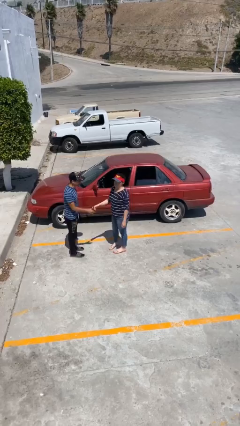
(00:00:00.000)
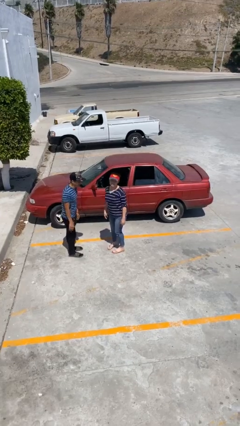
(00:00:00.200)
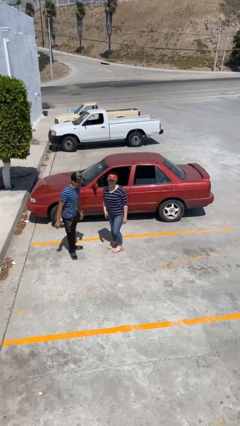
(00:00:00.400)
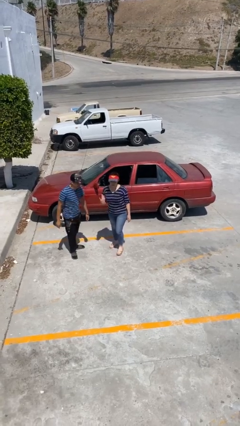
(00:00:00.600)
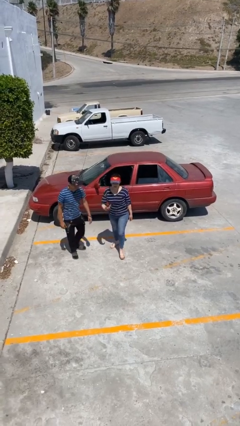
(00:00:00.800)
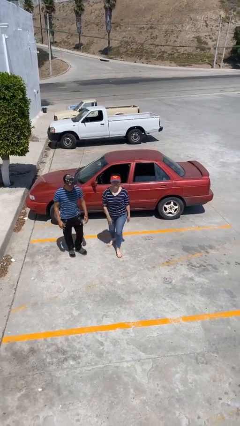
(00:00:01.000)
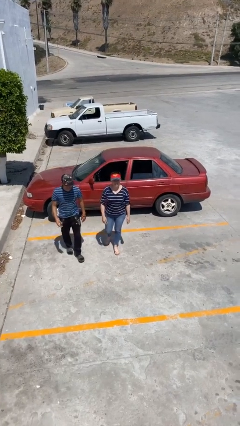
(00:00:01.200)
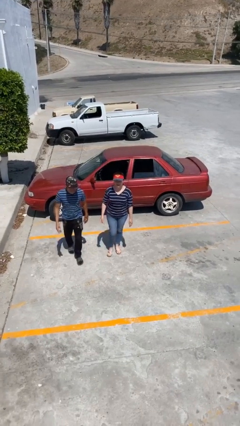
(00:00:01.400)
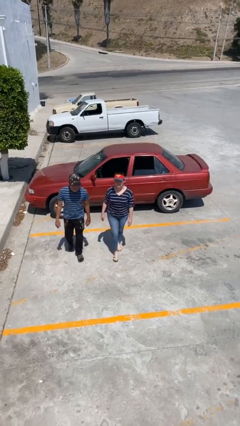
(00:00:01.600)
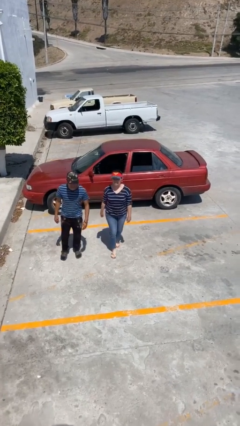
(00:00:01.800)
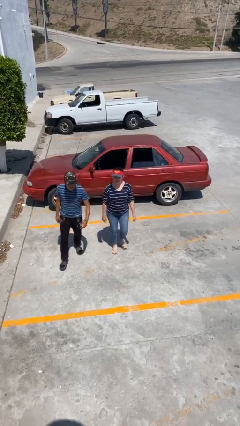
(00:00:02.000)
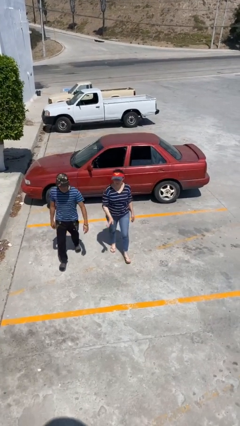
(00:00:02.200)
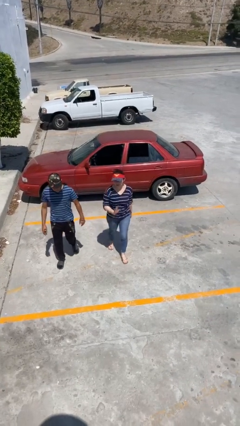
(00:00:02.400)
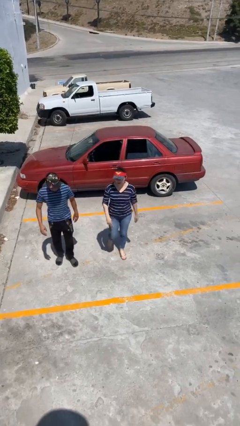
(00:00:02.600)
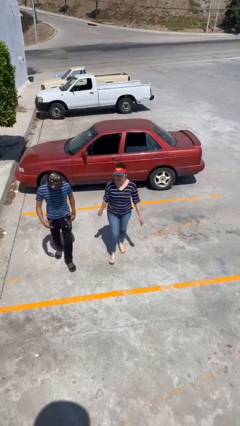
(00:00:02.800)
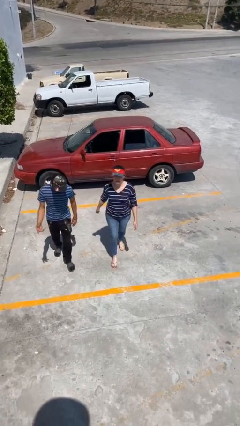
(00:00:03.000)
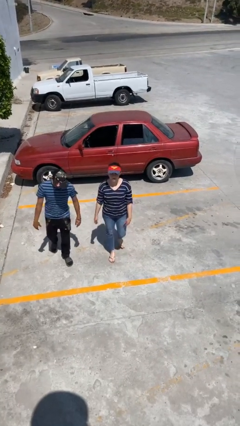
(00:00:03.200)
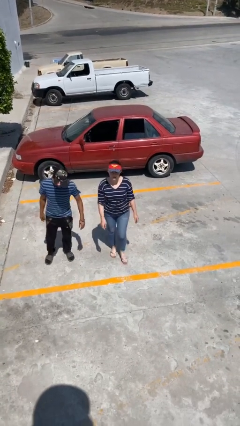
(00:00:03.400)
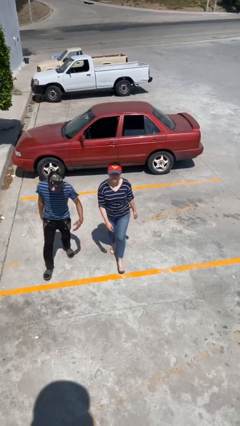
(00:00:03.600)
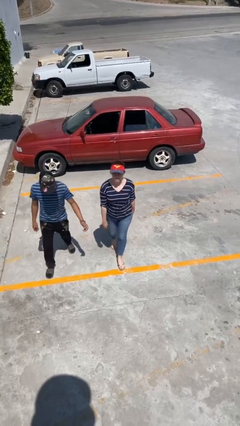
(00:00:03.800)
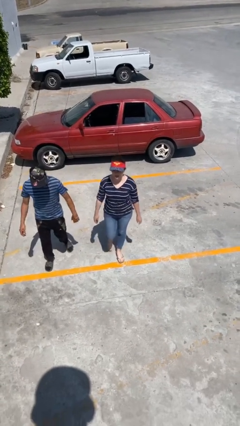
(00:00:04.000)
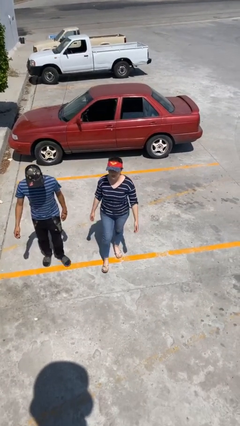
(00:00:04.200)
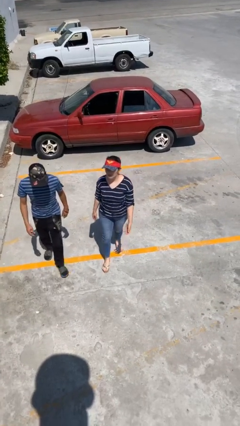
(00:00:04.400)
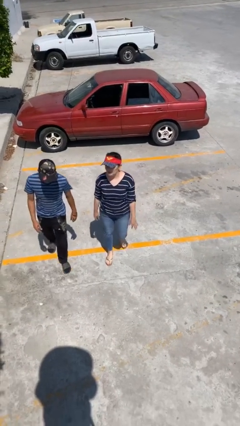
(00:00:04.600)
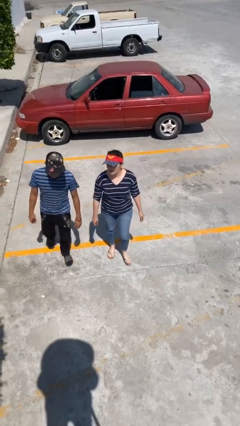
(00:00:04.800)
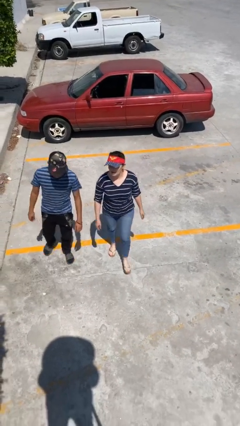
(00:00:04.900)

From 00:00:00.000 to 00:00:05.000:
person talks to person

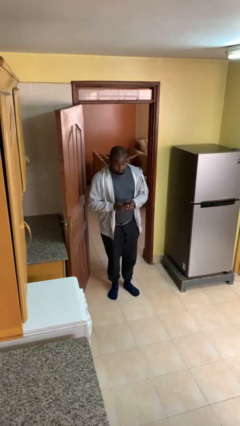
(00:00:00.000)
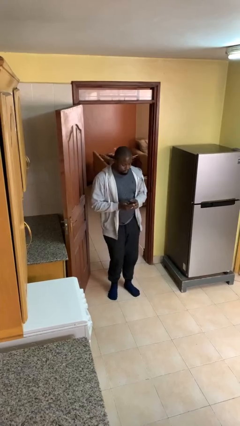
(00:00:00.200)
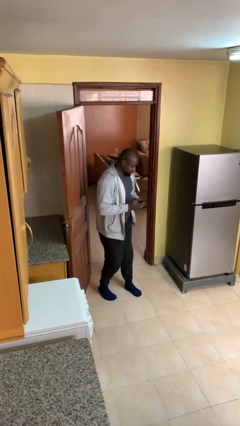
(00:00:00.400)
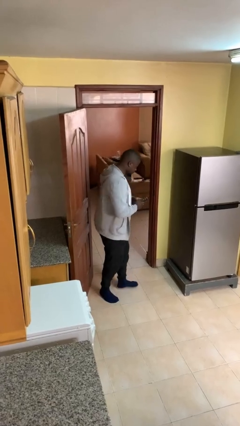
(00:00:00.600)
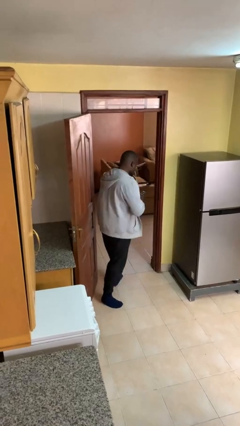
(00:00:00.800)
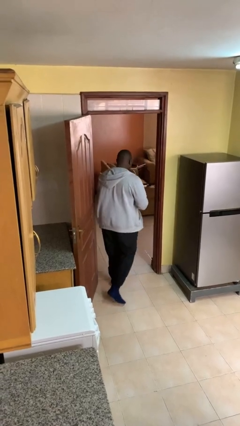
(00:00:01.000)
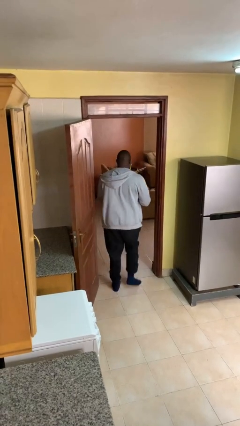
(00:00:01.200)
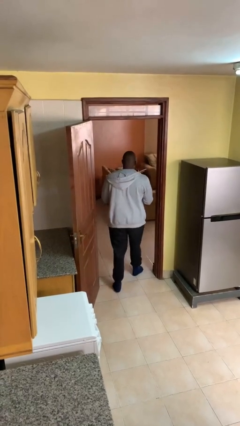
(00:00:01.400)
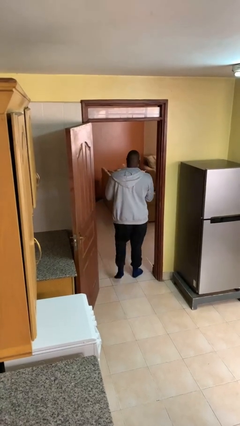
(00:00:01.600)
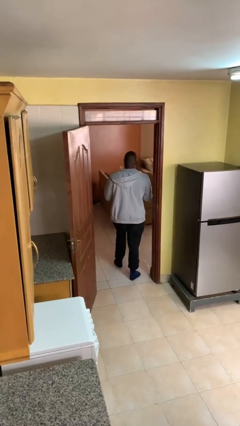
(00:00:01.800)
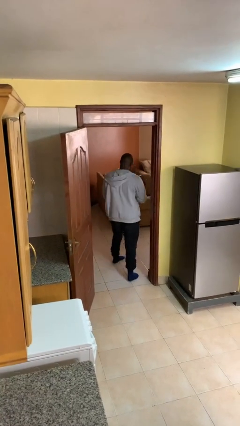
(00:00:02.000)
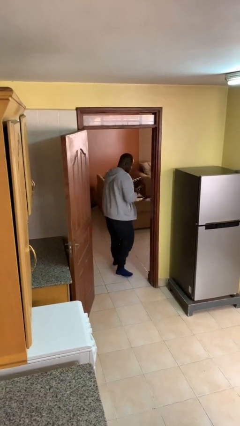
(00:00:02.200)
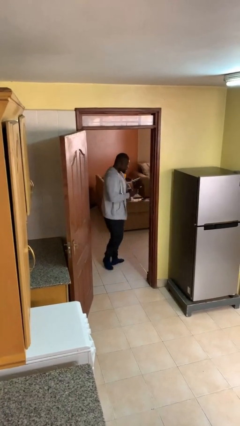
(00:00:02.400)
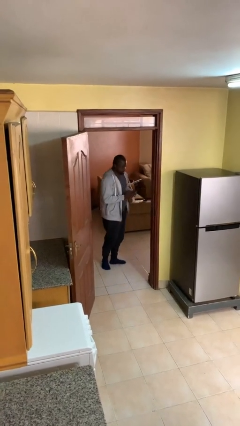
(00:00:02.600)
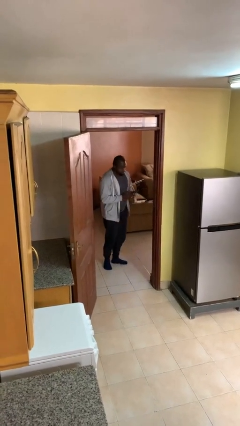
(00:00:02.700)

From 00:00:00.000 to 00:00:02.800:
person exits scene through structure

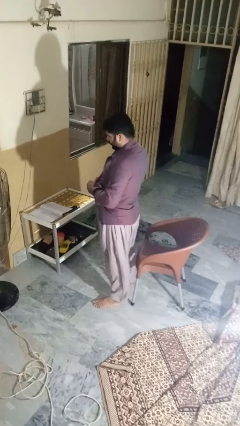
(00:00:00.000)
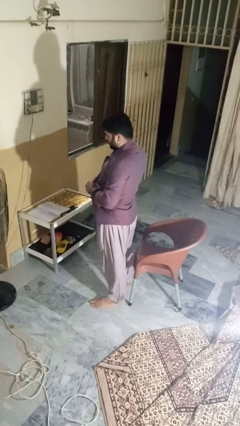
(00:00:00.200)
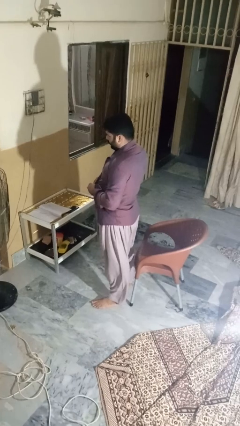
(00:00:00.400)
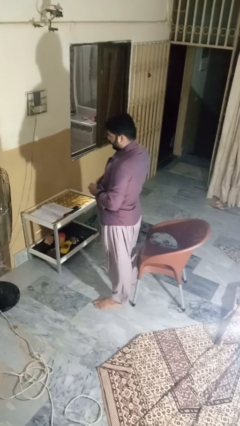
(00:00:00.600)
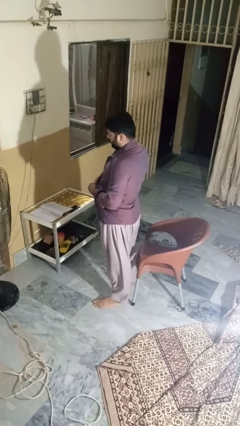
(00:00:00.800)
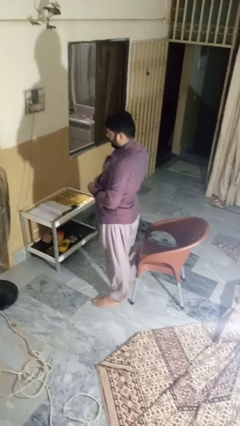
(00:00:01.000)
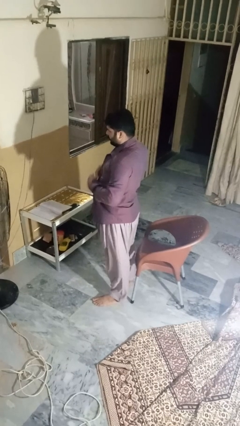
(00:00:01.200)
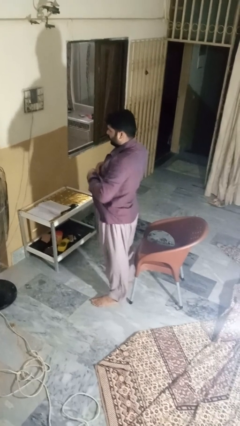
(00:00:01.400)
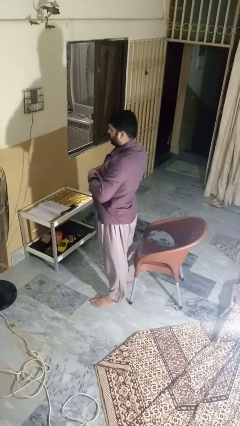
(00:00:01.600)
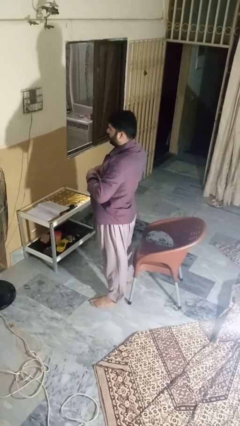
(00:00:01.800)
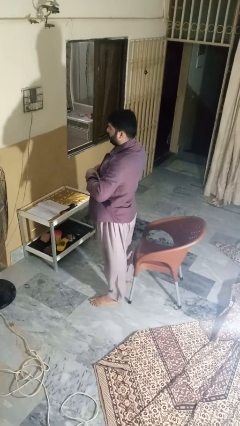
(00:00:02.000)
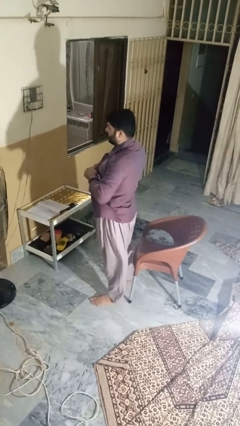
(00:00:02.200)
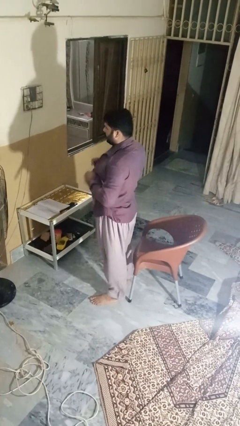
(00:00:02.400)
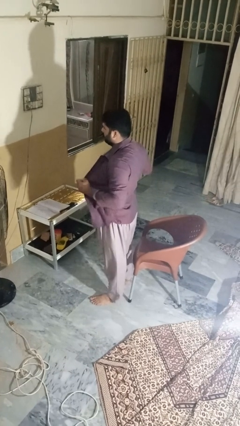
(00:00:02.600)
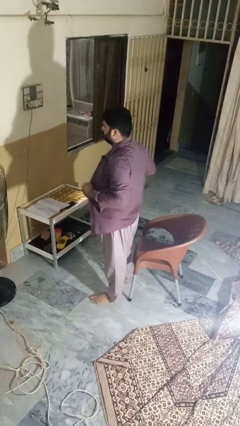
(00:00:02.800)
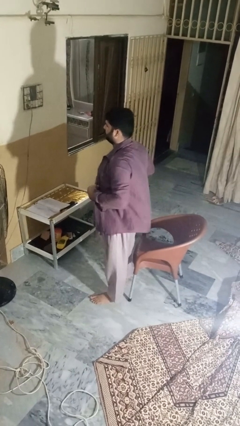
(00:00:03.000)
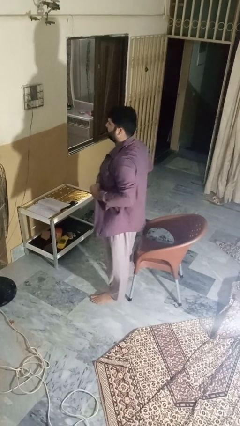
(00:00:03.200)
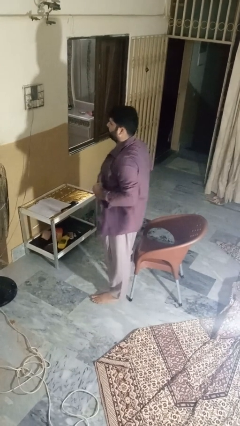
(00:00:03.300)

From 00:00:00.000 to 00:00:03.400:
person unbuttons shirt

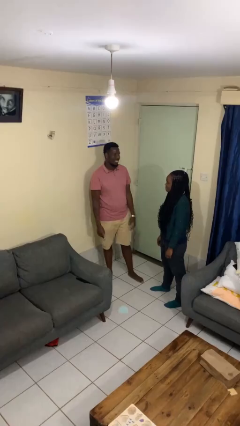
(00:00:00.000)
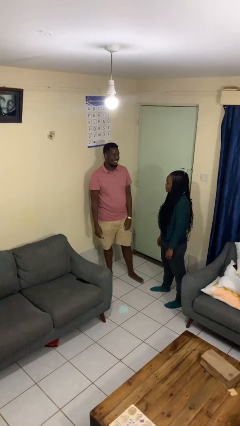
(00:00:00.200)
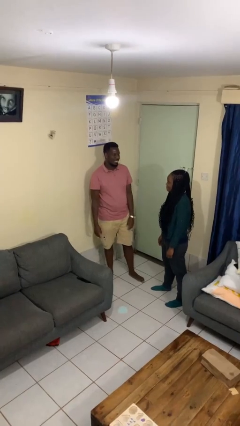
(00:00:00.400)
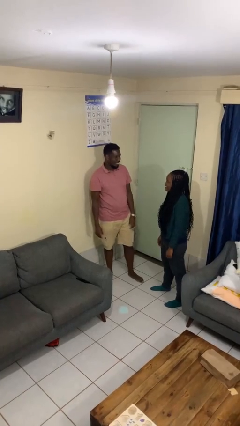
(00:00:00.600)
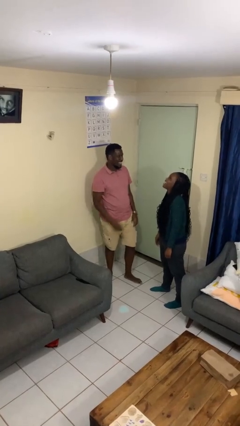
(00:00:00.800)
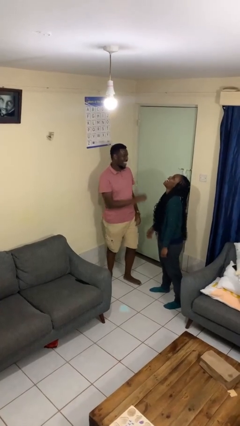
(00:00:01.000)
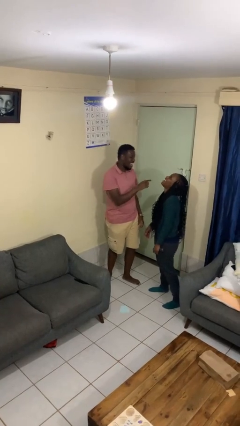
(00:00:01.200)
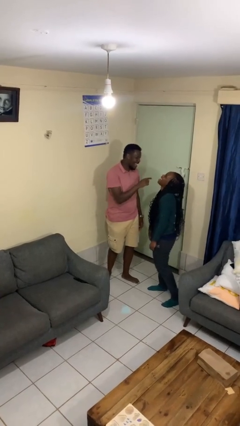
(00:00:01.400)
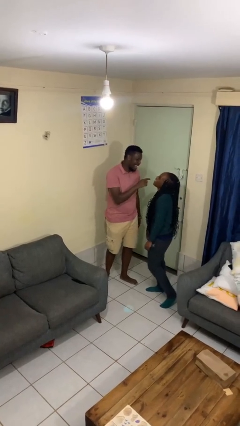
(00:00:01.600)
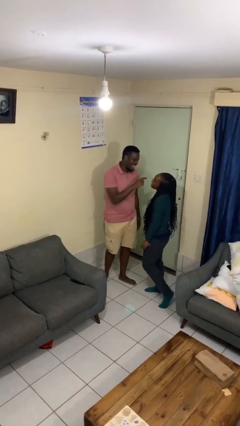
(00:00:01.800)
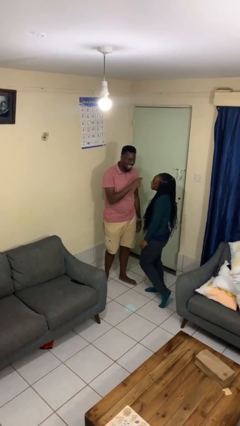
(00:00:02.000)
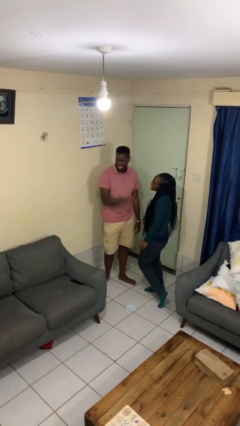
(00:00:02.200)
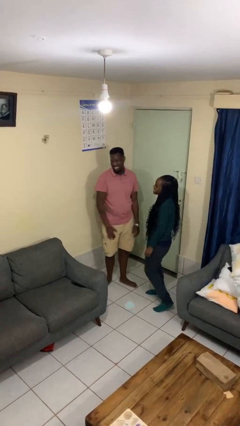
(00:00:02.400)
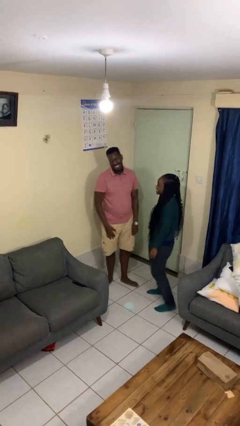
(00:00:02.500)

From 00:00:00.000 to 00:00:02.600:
person laughs with person

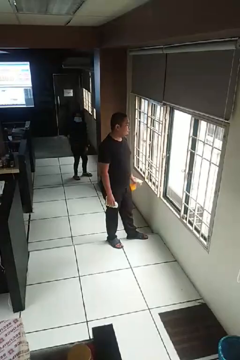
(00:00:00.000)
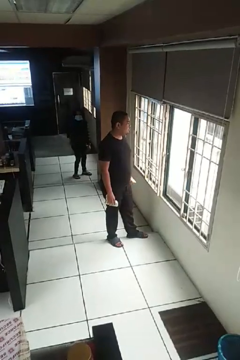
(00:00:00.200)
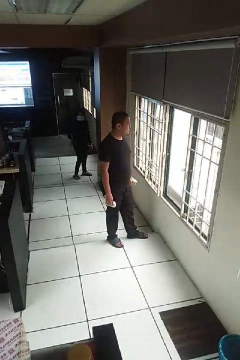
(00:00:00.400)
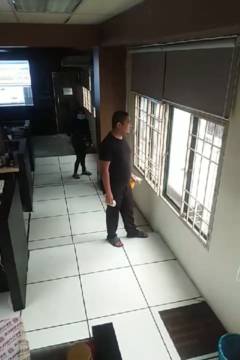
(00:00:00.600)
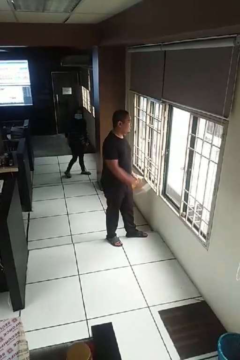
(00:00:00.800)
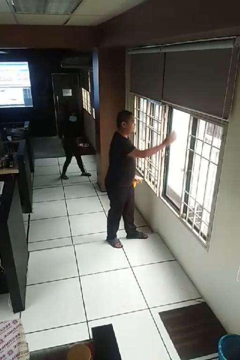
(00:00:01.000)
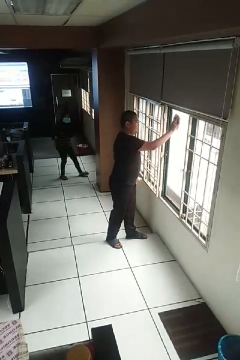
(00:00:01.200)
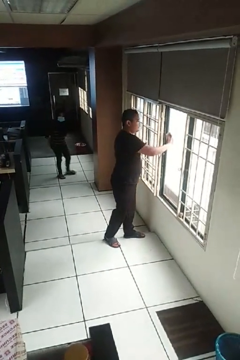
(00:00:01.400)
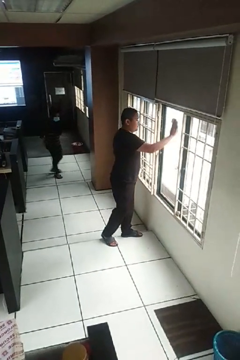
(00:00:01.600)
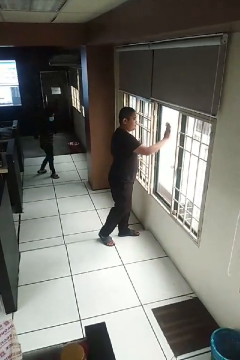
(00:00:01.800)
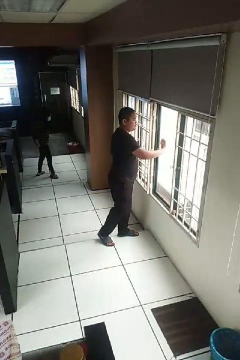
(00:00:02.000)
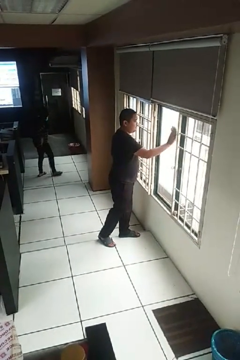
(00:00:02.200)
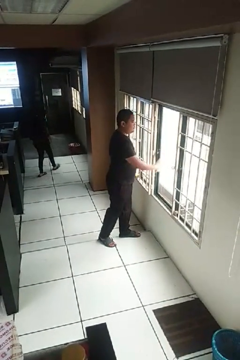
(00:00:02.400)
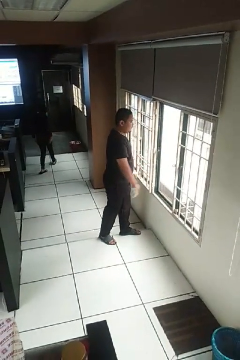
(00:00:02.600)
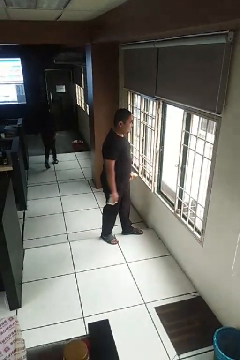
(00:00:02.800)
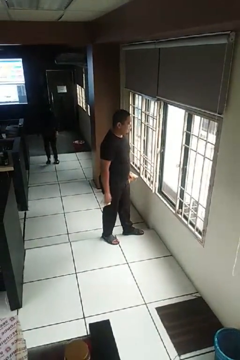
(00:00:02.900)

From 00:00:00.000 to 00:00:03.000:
person washes window

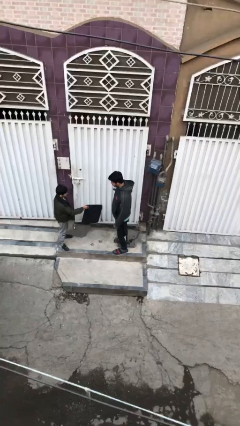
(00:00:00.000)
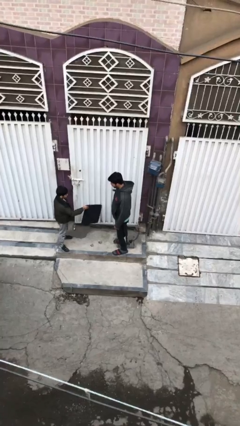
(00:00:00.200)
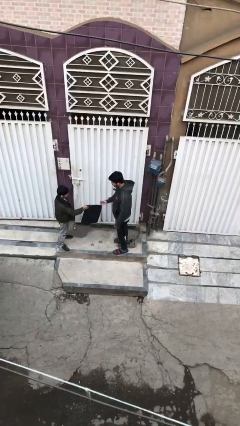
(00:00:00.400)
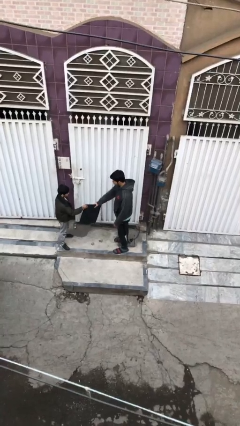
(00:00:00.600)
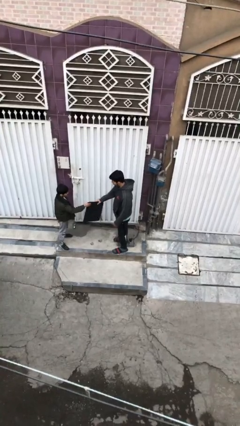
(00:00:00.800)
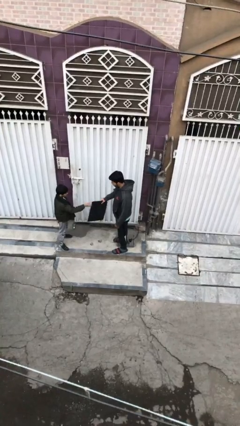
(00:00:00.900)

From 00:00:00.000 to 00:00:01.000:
person transfers object to person
